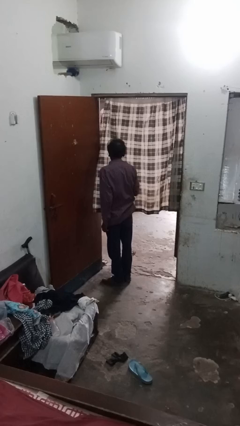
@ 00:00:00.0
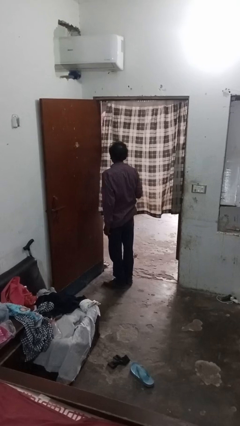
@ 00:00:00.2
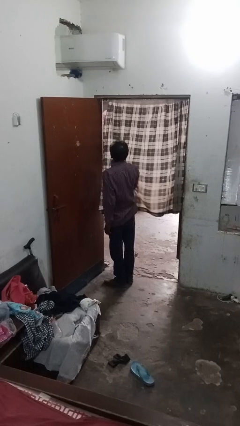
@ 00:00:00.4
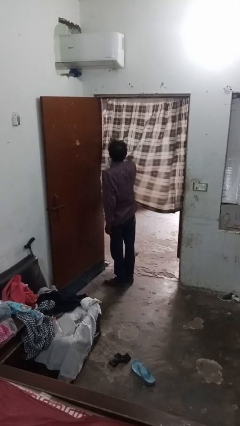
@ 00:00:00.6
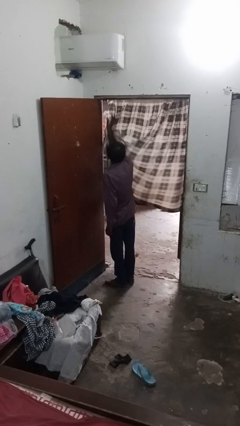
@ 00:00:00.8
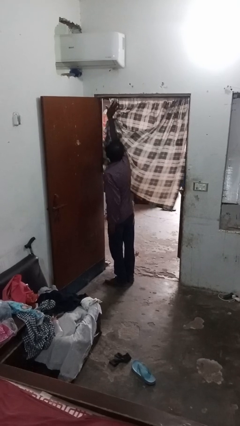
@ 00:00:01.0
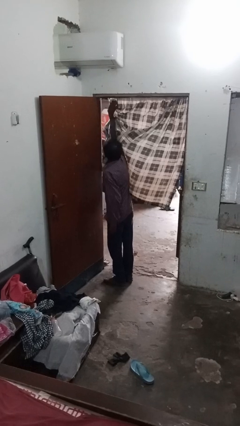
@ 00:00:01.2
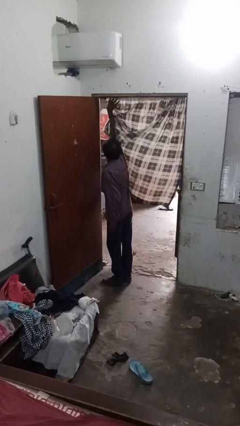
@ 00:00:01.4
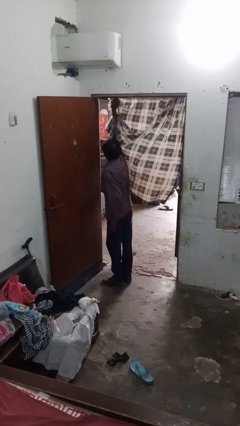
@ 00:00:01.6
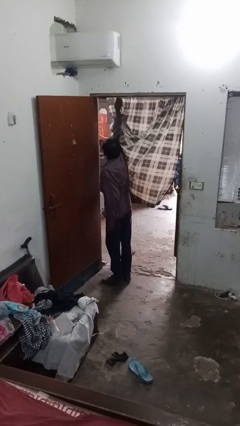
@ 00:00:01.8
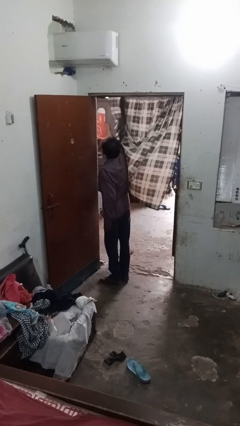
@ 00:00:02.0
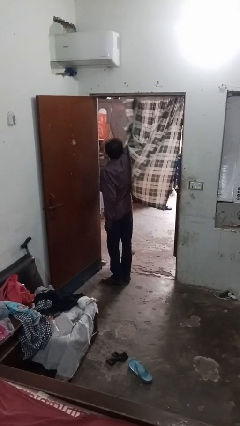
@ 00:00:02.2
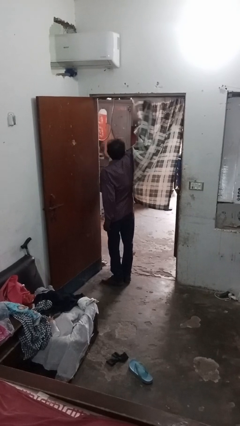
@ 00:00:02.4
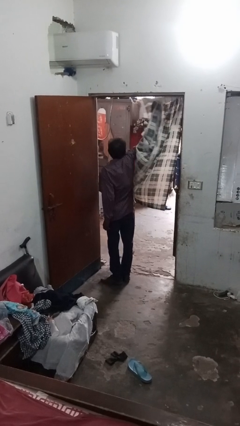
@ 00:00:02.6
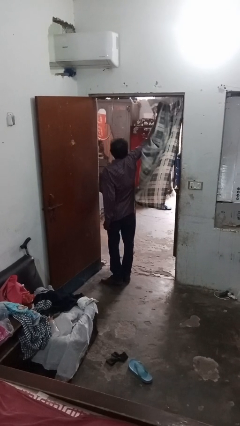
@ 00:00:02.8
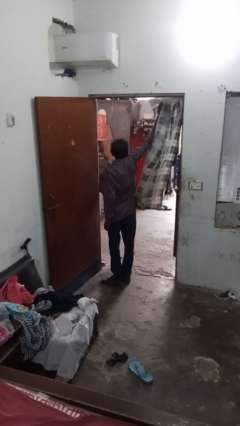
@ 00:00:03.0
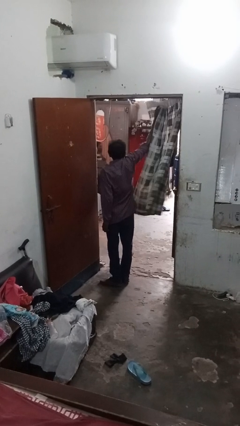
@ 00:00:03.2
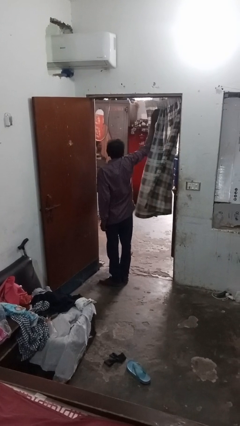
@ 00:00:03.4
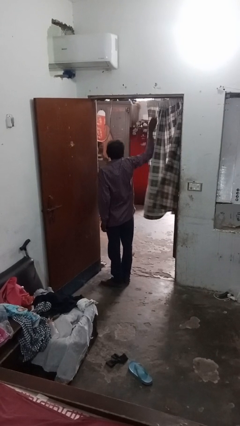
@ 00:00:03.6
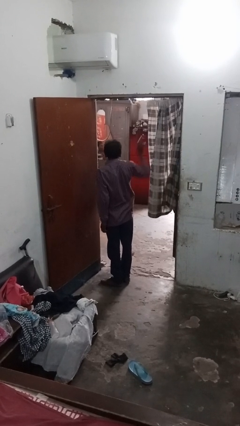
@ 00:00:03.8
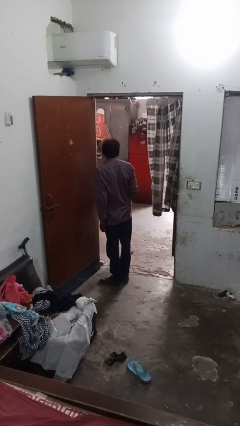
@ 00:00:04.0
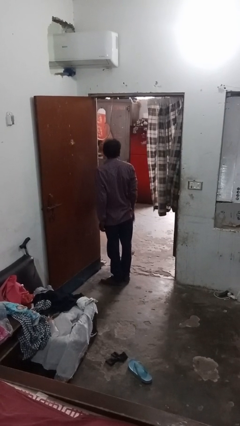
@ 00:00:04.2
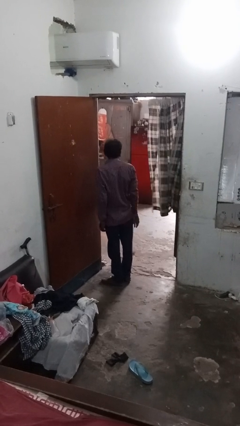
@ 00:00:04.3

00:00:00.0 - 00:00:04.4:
person opens curtains

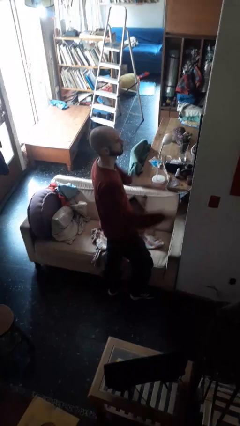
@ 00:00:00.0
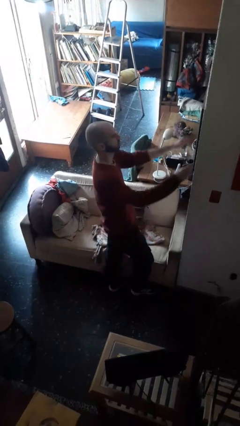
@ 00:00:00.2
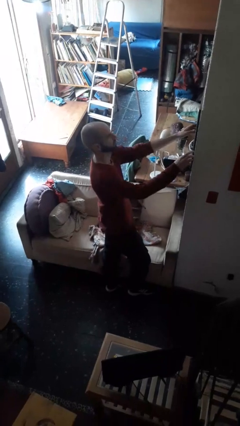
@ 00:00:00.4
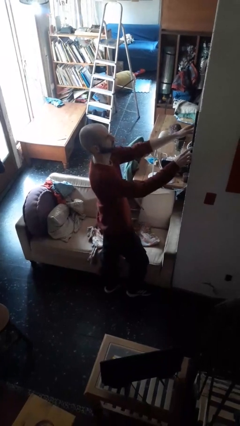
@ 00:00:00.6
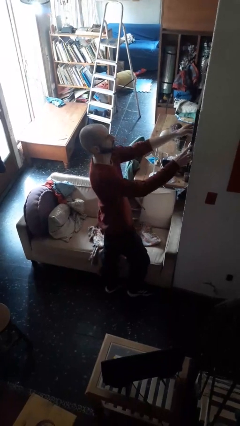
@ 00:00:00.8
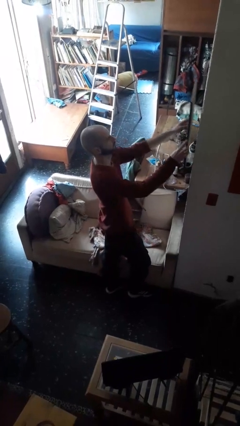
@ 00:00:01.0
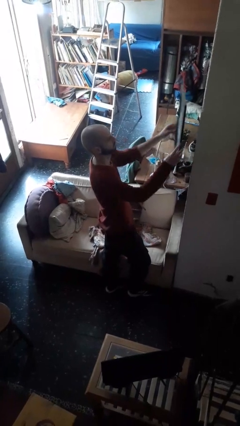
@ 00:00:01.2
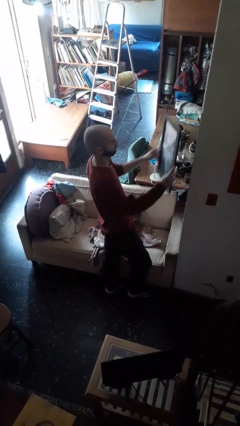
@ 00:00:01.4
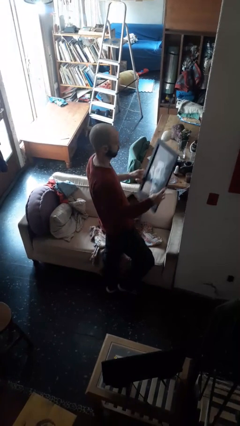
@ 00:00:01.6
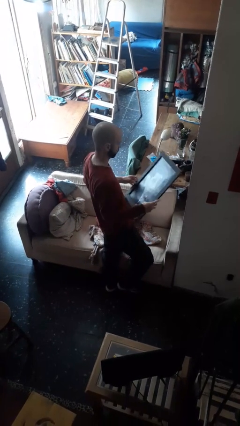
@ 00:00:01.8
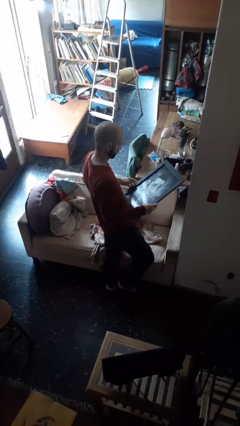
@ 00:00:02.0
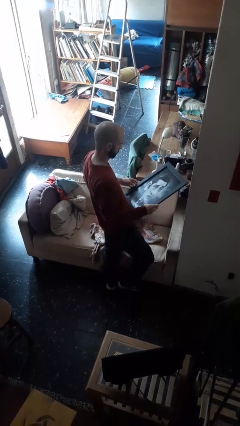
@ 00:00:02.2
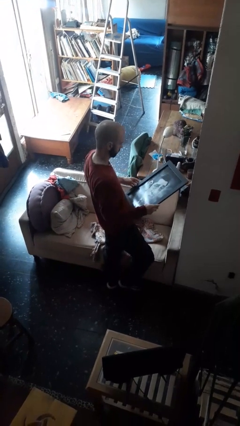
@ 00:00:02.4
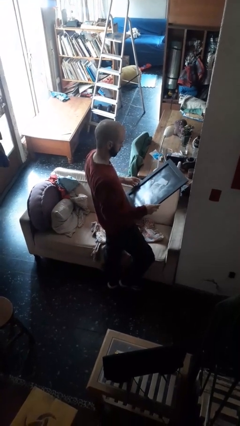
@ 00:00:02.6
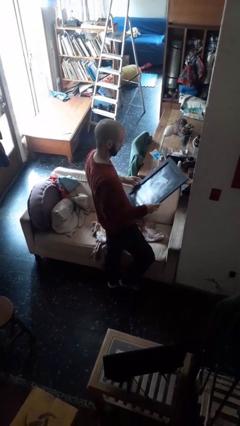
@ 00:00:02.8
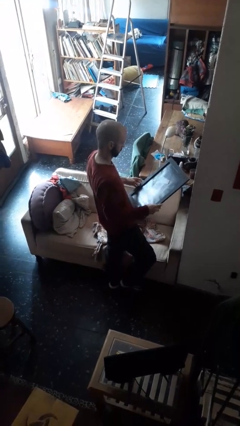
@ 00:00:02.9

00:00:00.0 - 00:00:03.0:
person takes down picture frame

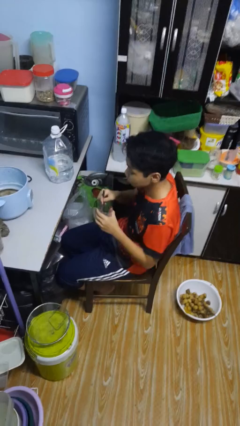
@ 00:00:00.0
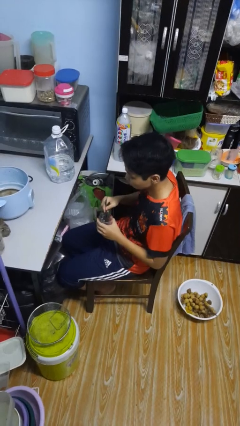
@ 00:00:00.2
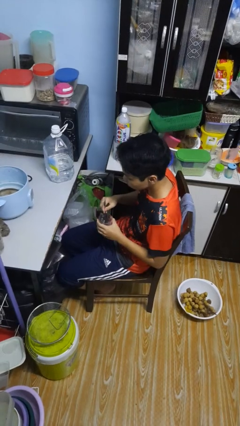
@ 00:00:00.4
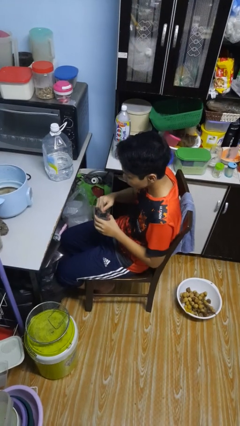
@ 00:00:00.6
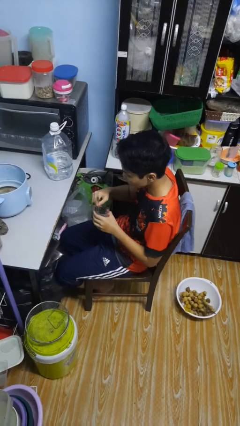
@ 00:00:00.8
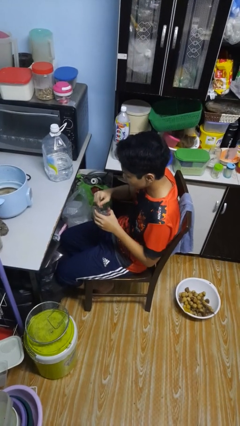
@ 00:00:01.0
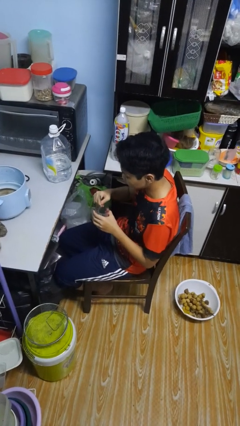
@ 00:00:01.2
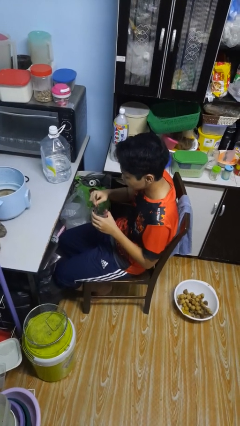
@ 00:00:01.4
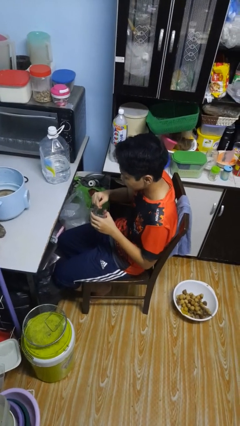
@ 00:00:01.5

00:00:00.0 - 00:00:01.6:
person stirs mug

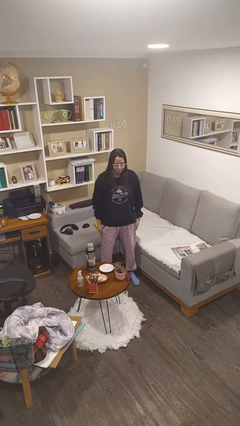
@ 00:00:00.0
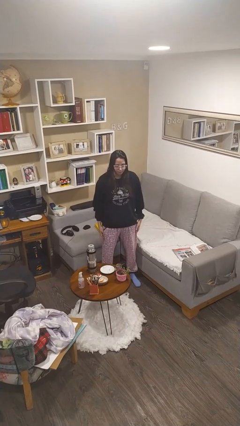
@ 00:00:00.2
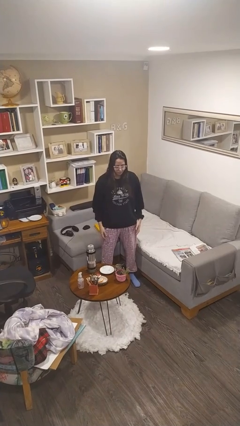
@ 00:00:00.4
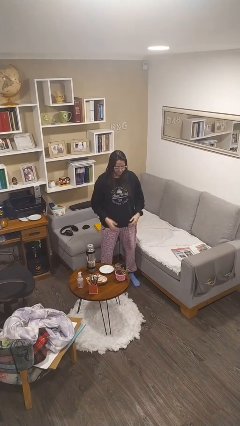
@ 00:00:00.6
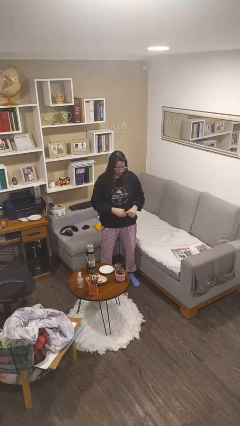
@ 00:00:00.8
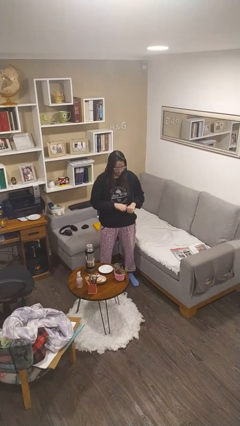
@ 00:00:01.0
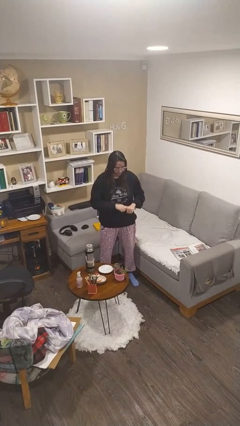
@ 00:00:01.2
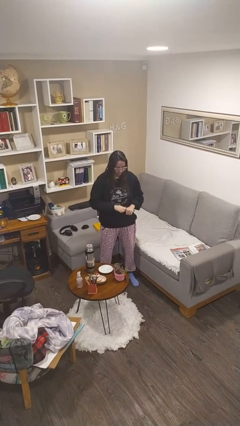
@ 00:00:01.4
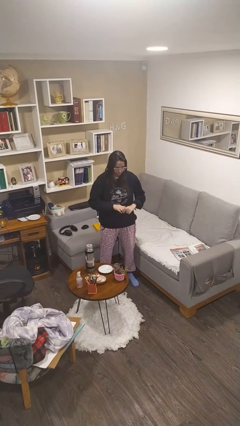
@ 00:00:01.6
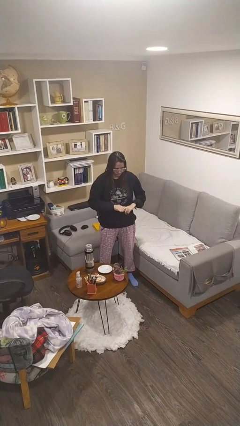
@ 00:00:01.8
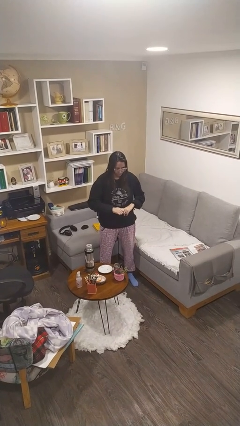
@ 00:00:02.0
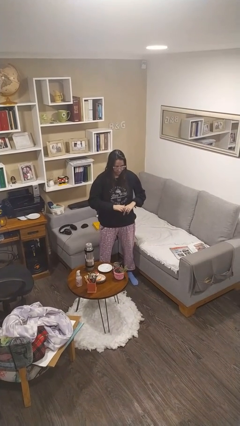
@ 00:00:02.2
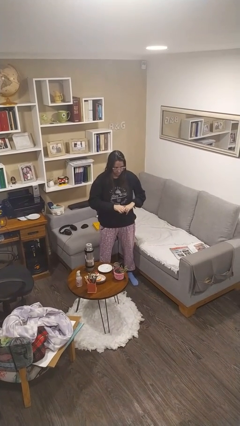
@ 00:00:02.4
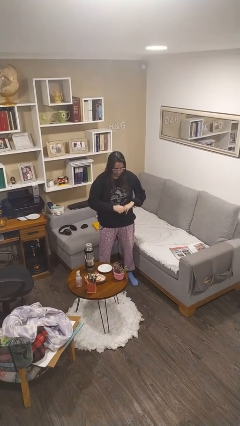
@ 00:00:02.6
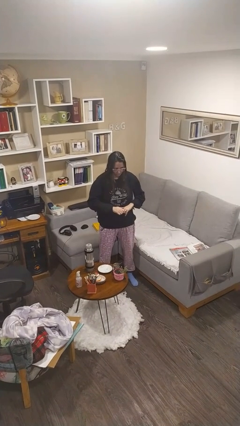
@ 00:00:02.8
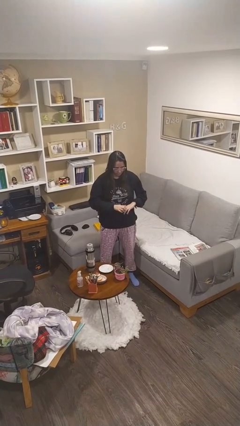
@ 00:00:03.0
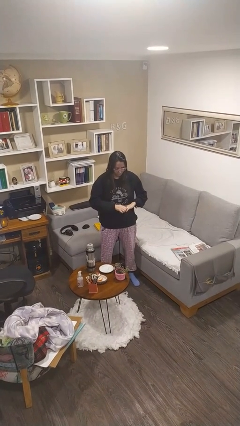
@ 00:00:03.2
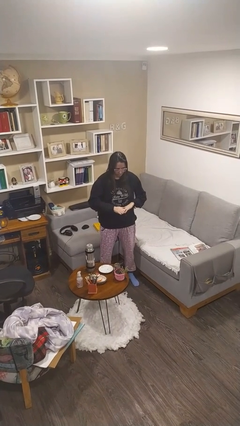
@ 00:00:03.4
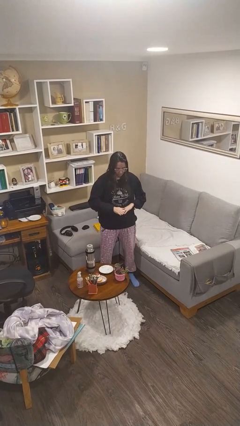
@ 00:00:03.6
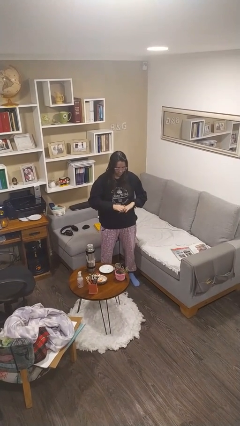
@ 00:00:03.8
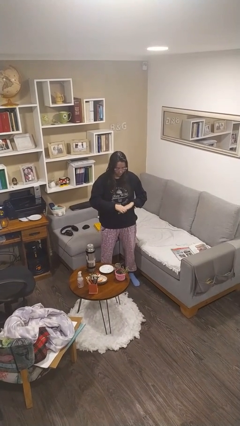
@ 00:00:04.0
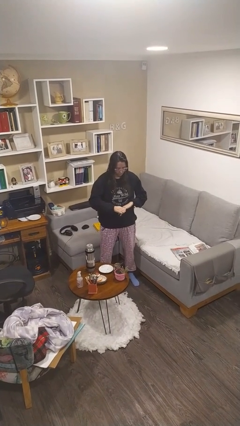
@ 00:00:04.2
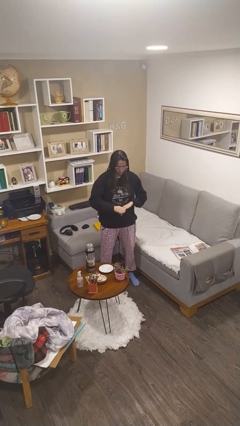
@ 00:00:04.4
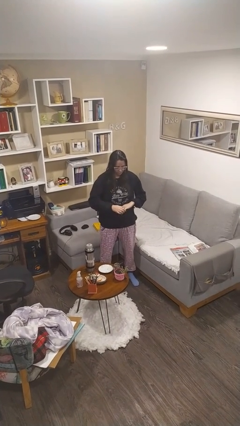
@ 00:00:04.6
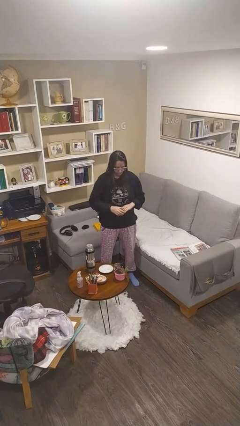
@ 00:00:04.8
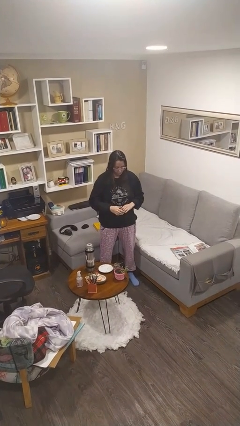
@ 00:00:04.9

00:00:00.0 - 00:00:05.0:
person cracks knuckles

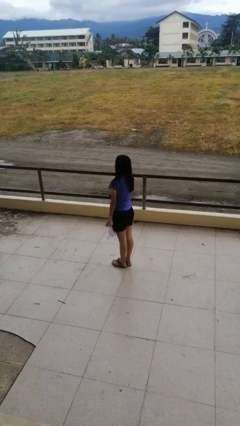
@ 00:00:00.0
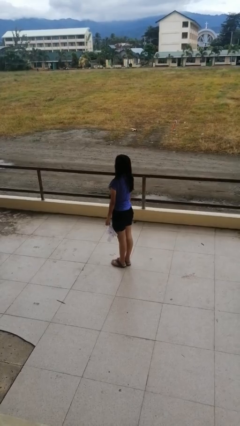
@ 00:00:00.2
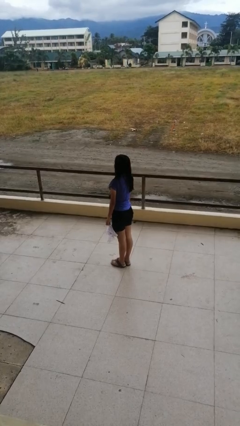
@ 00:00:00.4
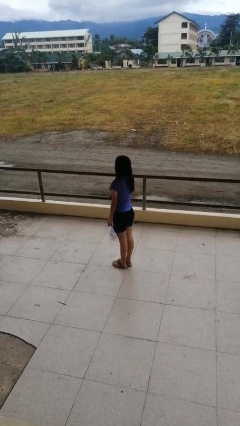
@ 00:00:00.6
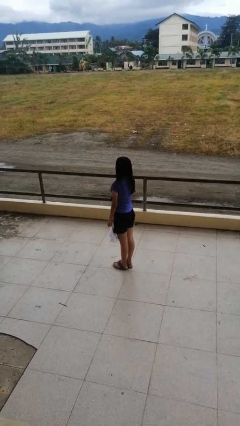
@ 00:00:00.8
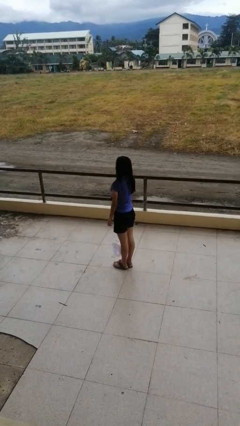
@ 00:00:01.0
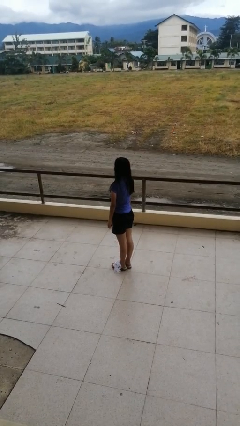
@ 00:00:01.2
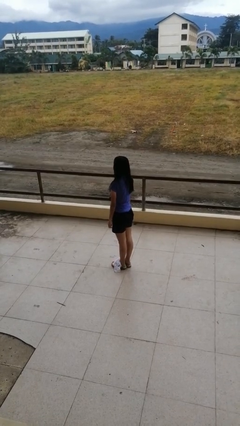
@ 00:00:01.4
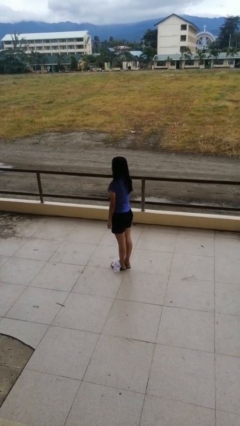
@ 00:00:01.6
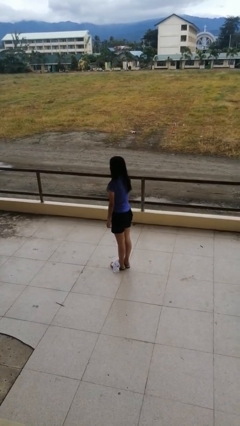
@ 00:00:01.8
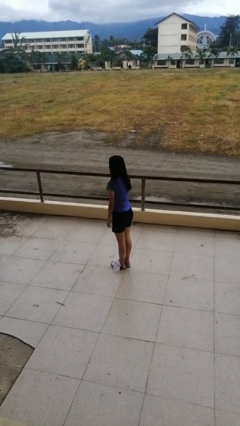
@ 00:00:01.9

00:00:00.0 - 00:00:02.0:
person drops object

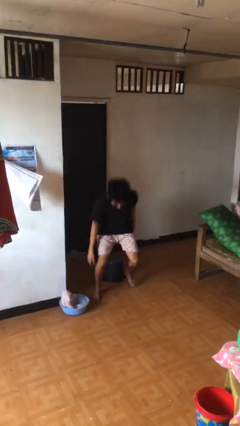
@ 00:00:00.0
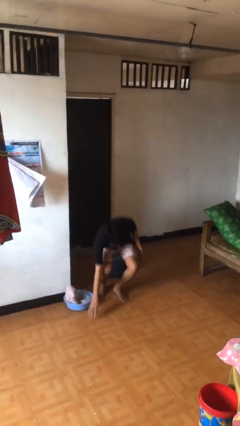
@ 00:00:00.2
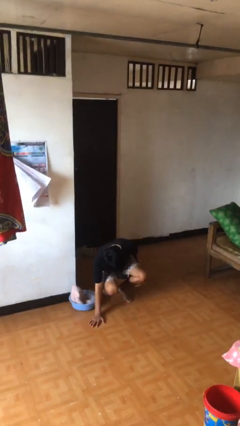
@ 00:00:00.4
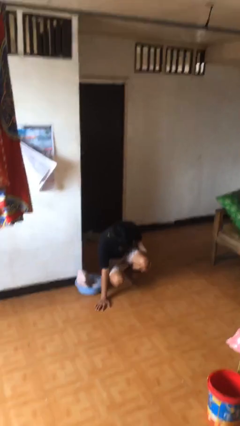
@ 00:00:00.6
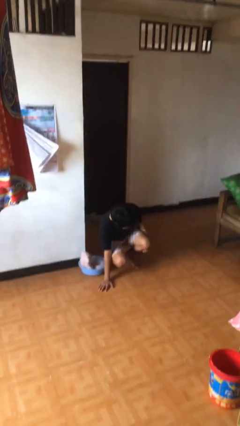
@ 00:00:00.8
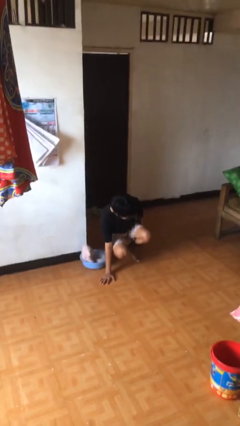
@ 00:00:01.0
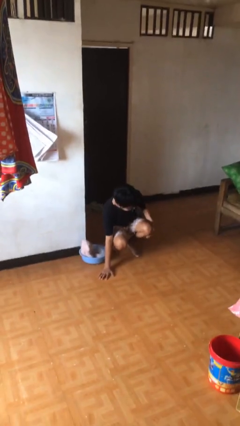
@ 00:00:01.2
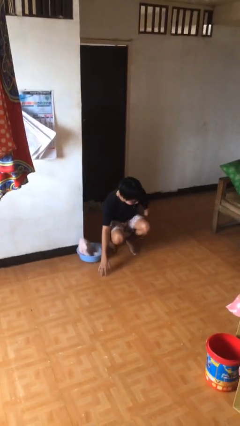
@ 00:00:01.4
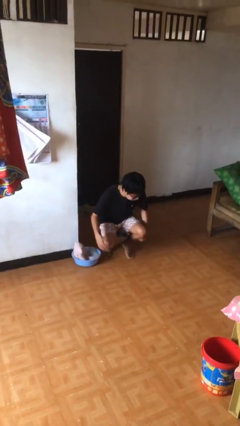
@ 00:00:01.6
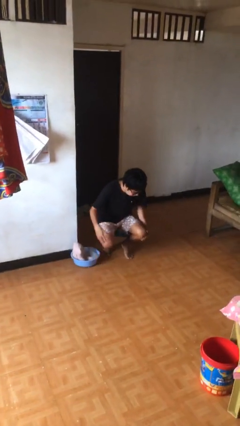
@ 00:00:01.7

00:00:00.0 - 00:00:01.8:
person lies down on floor
